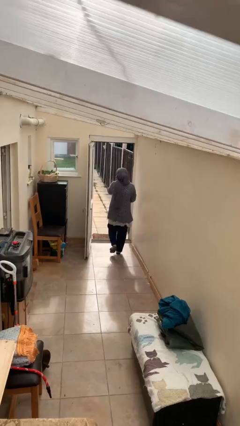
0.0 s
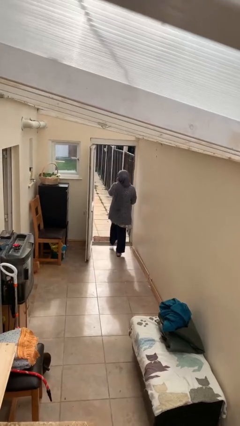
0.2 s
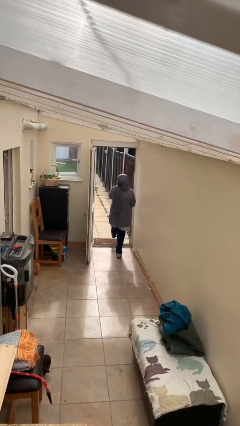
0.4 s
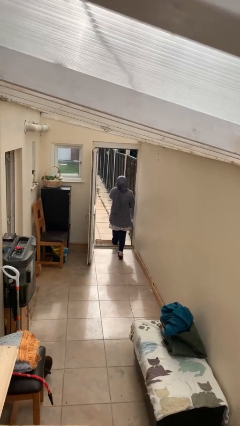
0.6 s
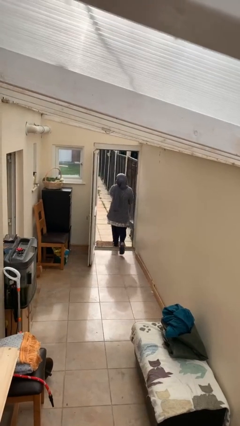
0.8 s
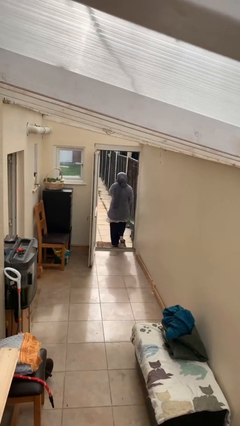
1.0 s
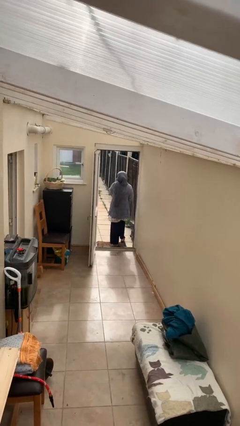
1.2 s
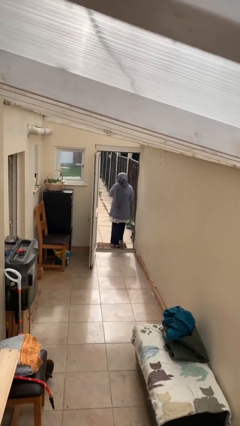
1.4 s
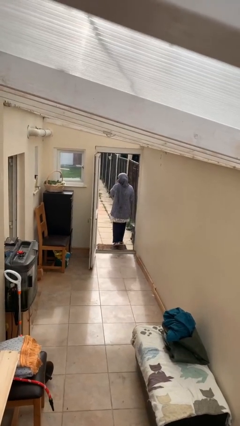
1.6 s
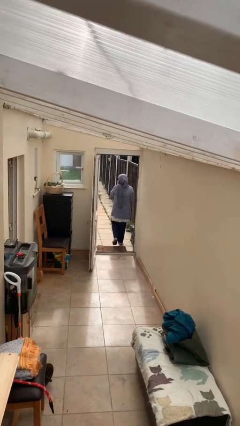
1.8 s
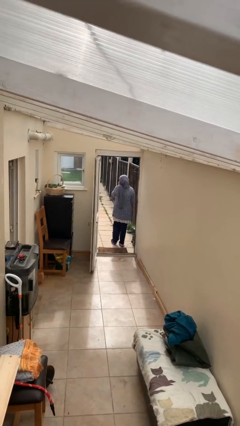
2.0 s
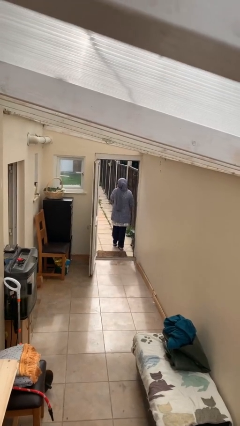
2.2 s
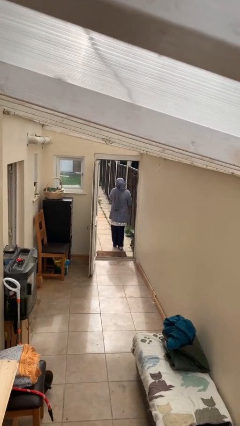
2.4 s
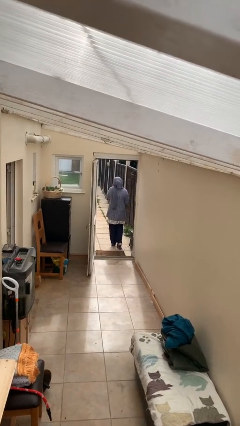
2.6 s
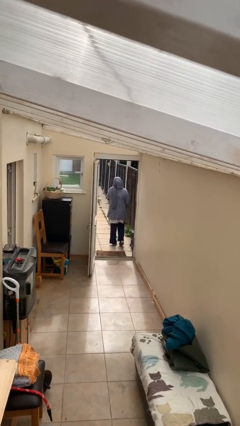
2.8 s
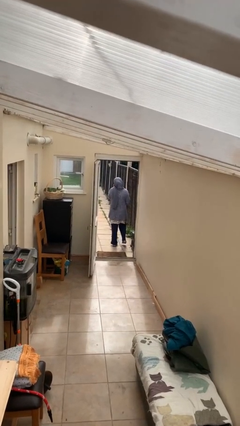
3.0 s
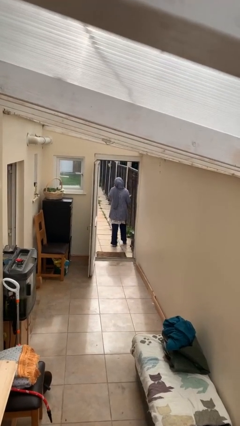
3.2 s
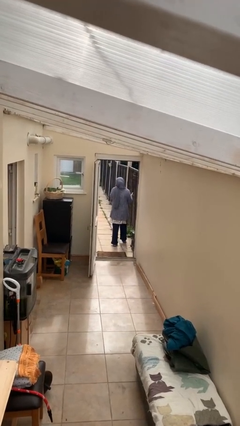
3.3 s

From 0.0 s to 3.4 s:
person exits scene through structure

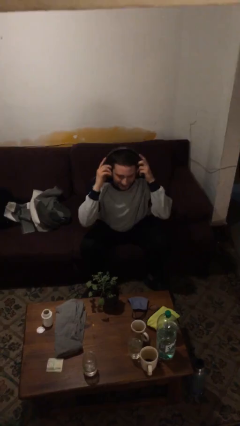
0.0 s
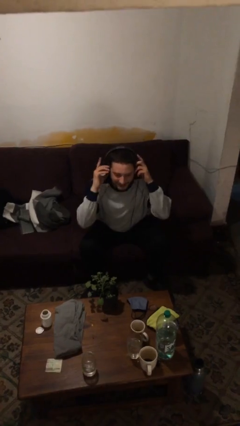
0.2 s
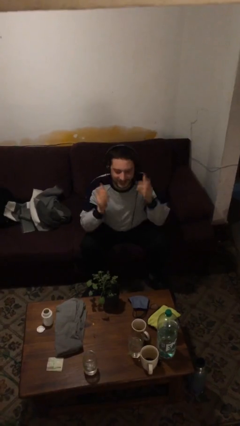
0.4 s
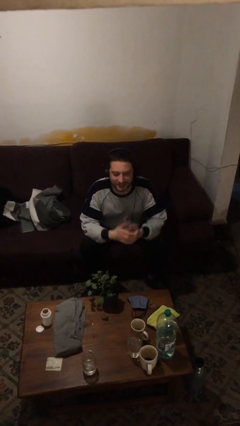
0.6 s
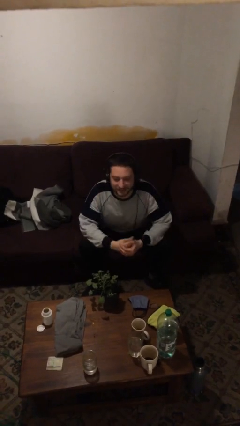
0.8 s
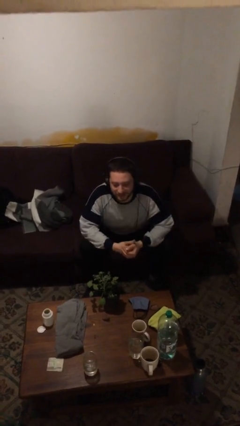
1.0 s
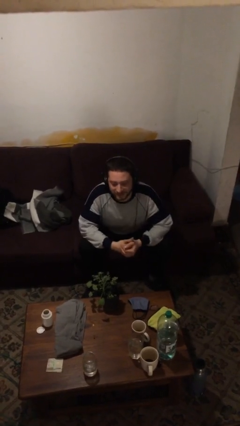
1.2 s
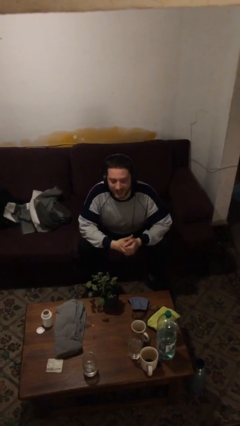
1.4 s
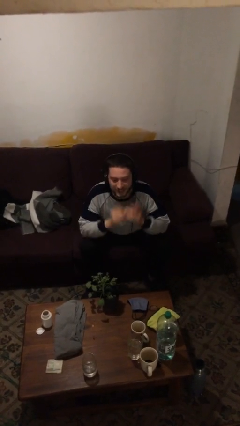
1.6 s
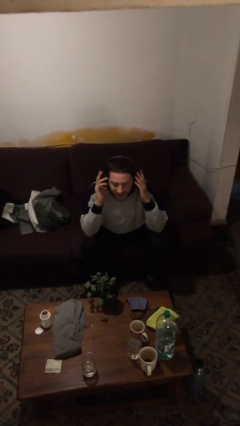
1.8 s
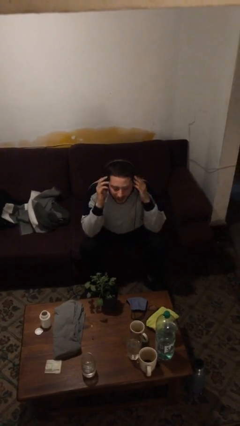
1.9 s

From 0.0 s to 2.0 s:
person puts on headphones

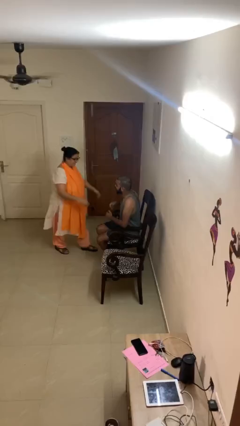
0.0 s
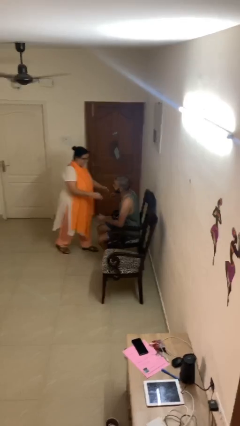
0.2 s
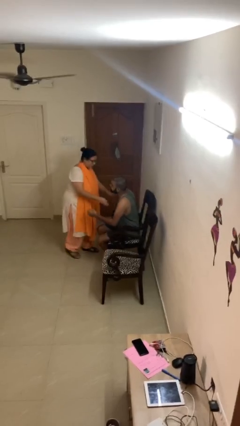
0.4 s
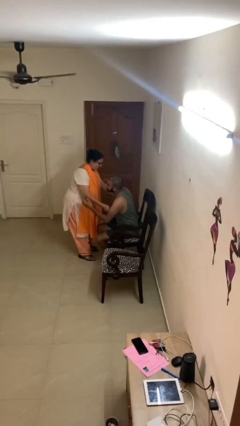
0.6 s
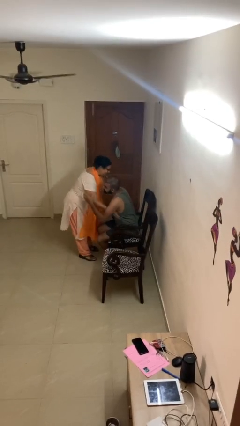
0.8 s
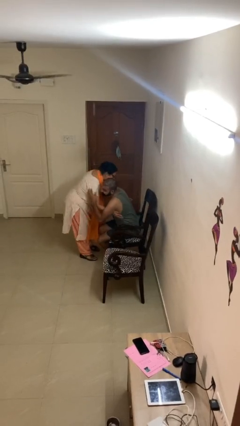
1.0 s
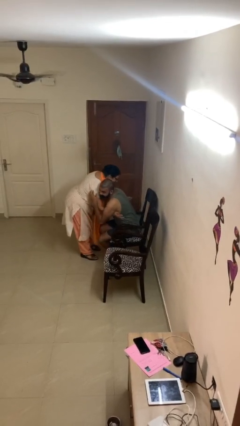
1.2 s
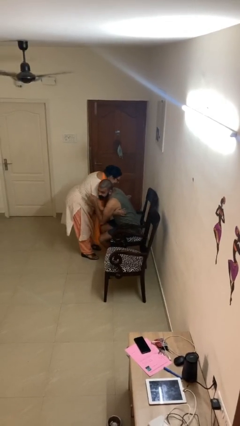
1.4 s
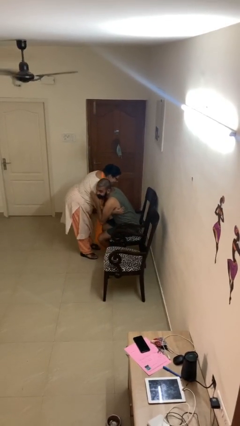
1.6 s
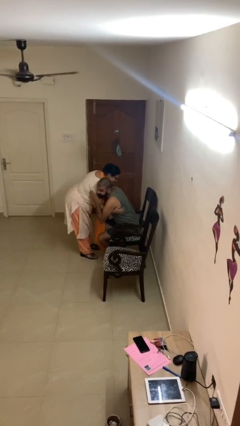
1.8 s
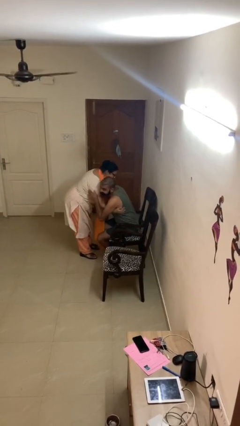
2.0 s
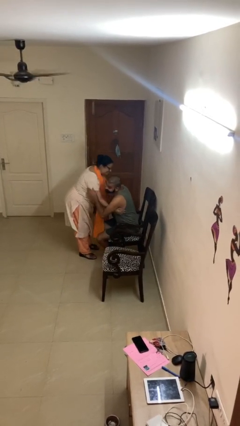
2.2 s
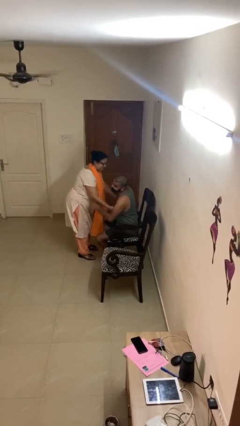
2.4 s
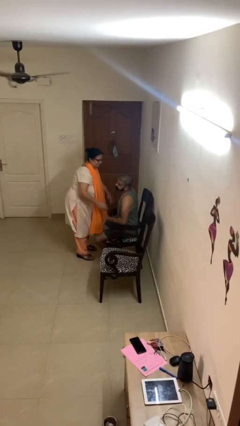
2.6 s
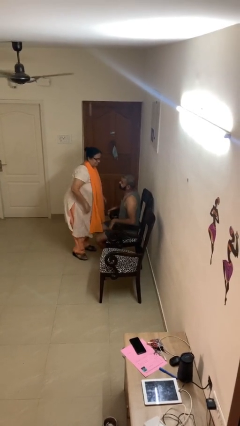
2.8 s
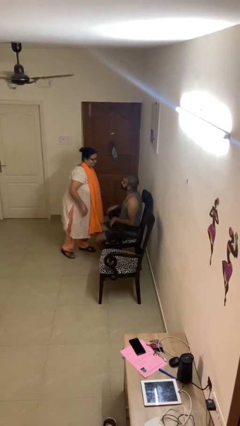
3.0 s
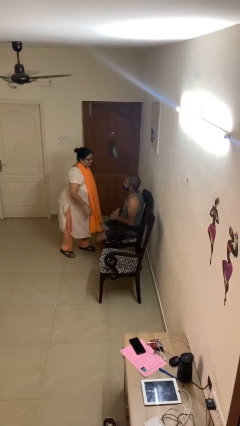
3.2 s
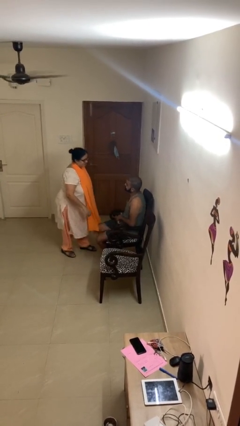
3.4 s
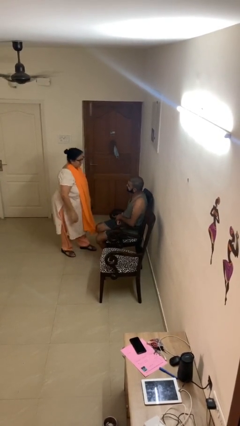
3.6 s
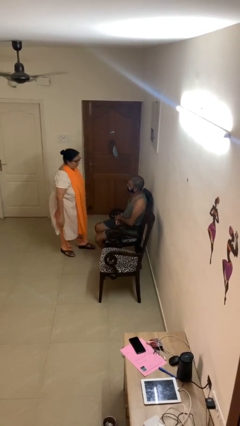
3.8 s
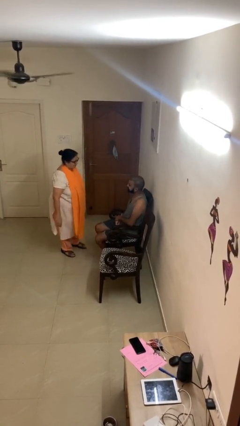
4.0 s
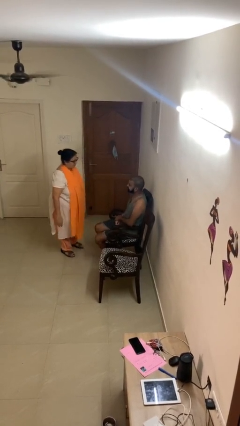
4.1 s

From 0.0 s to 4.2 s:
person embraces person

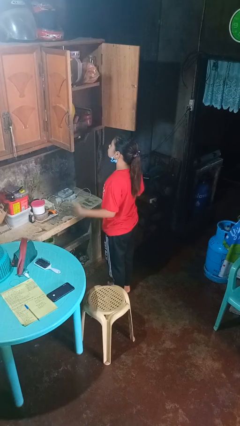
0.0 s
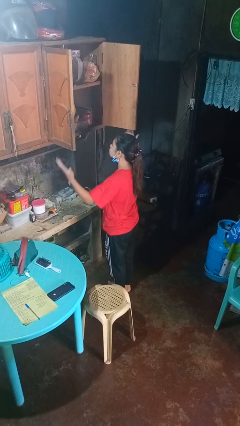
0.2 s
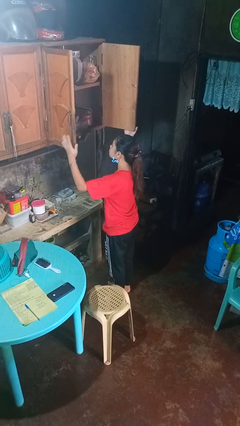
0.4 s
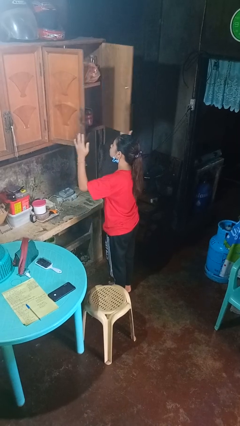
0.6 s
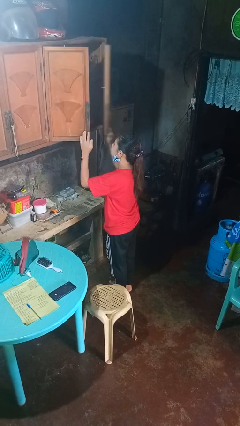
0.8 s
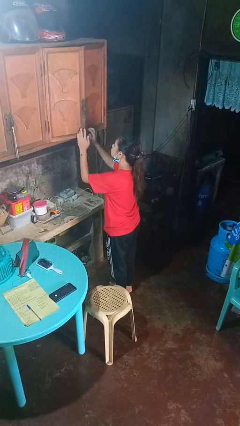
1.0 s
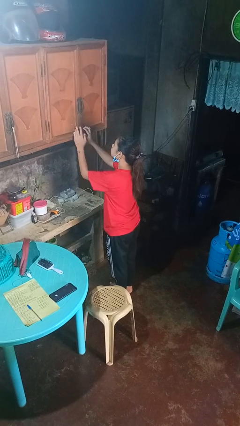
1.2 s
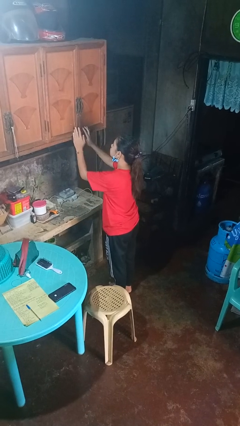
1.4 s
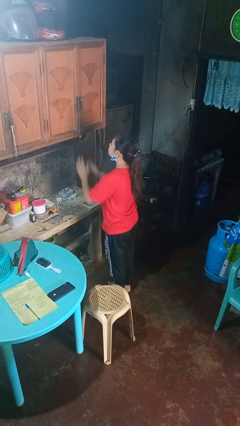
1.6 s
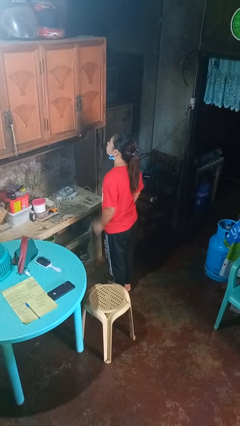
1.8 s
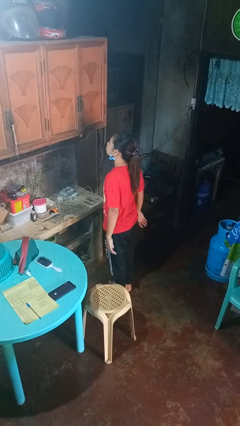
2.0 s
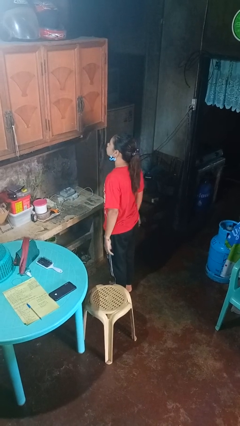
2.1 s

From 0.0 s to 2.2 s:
person closes cabinet

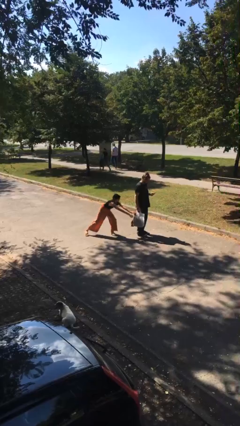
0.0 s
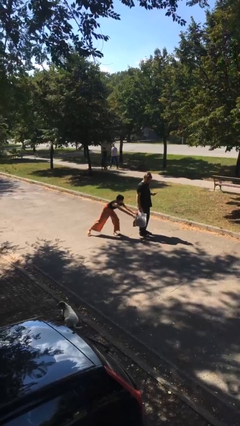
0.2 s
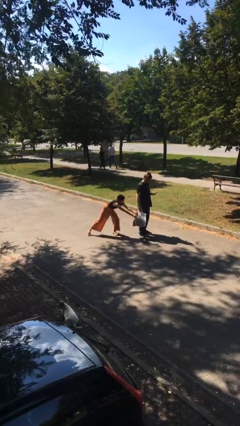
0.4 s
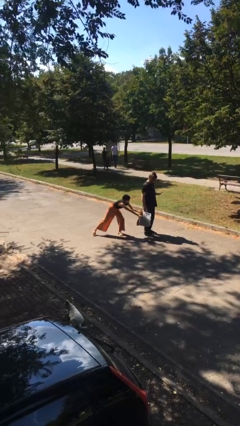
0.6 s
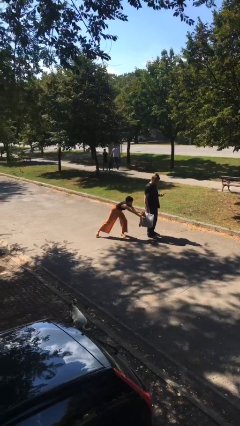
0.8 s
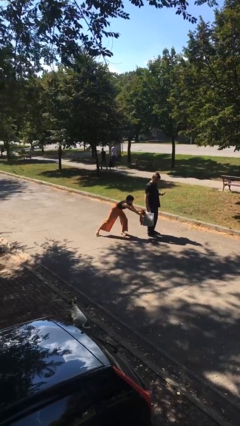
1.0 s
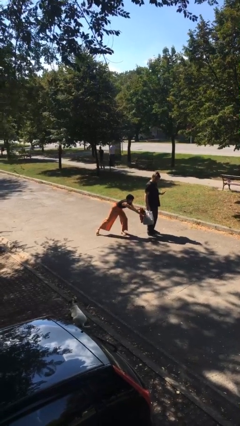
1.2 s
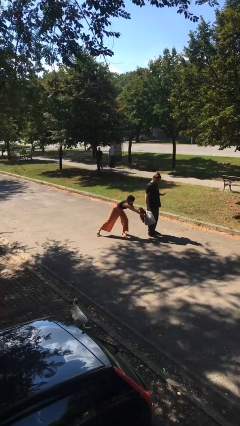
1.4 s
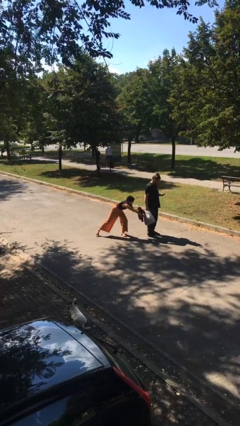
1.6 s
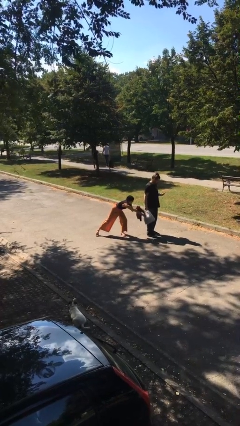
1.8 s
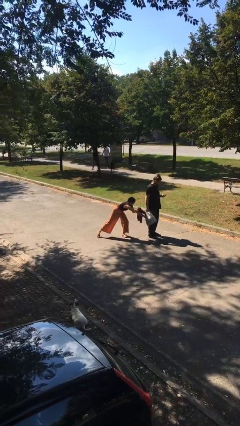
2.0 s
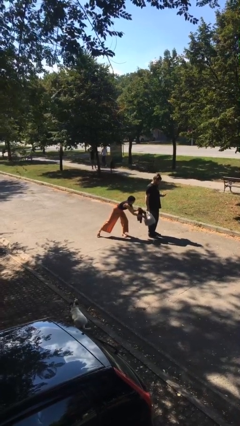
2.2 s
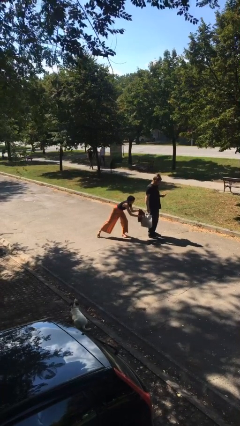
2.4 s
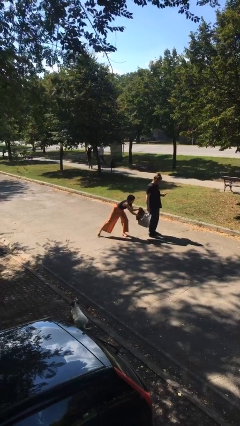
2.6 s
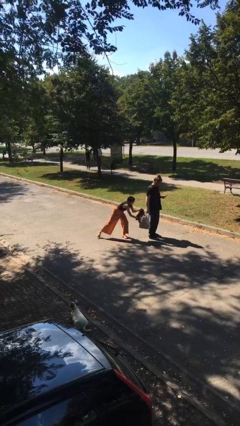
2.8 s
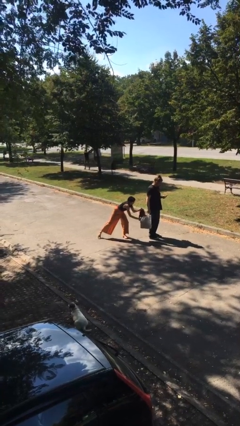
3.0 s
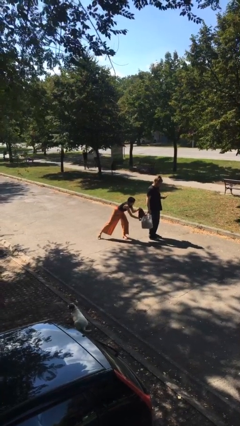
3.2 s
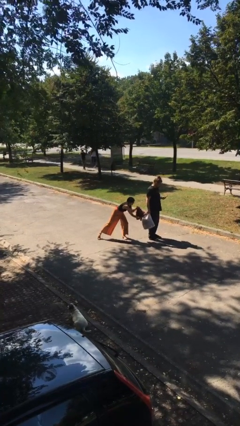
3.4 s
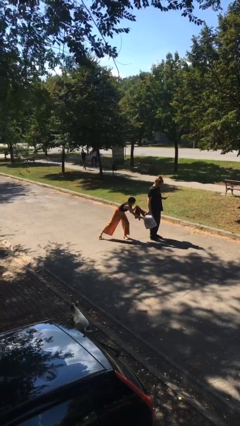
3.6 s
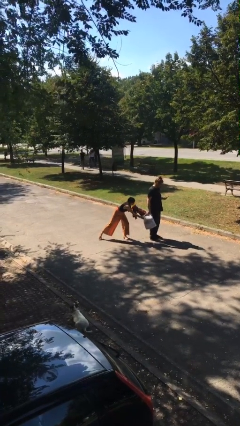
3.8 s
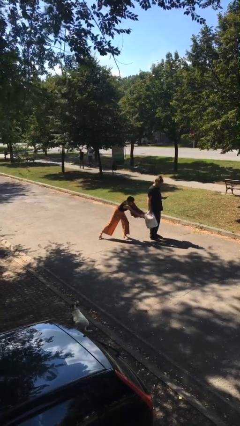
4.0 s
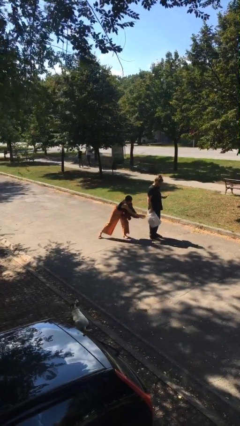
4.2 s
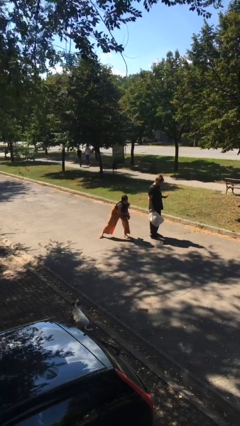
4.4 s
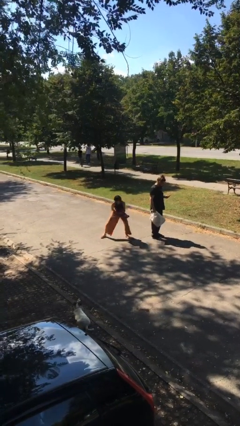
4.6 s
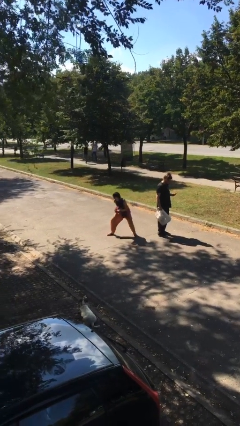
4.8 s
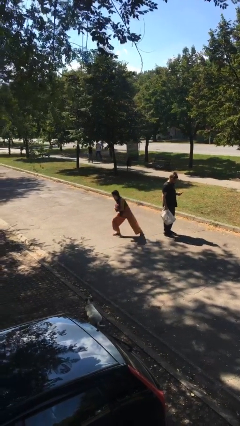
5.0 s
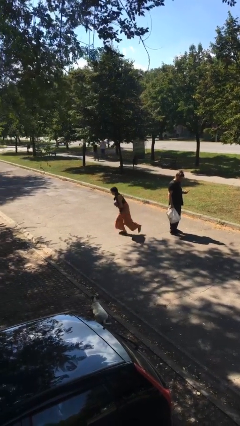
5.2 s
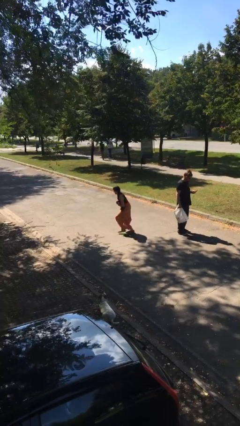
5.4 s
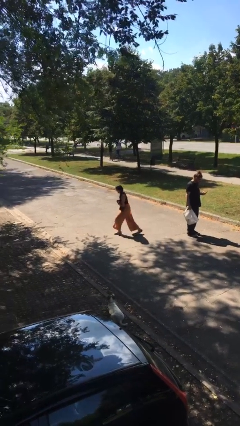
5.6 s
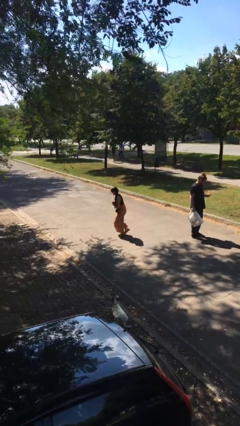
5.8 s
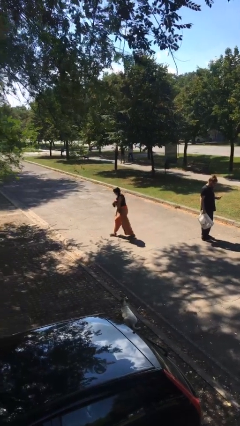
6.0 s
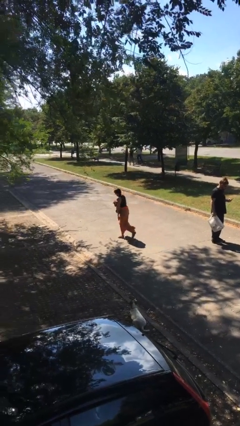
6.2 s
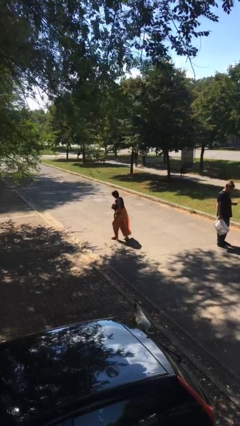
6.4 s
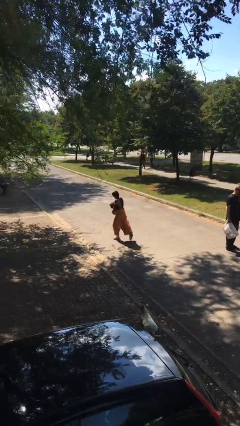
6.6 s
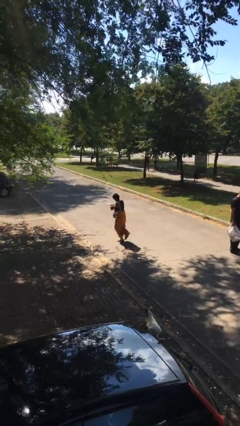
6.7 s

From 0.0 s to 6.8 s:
person steals object from person
